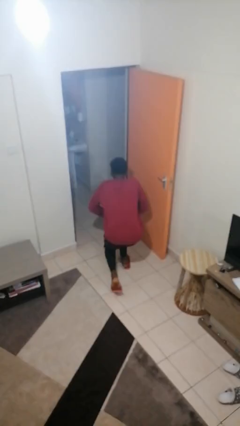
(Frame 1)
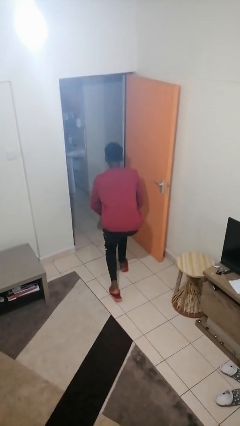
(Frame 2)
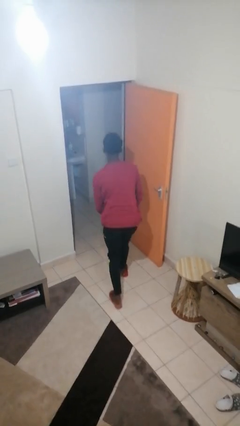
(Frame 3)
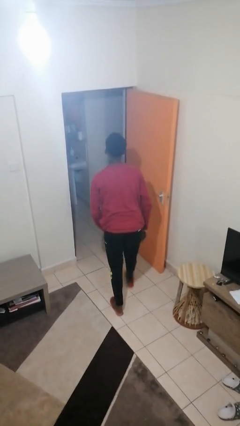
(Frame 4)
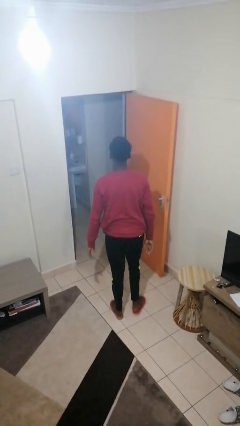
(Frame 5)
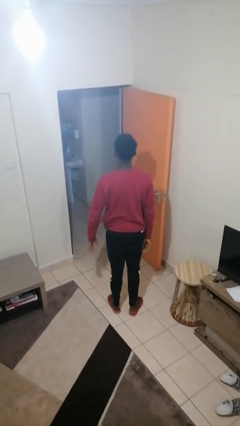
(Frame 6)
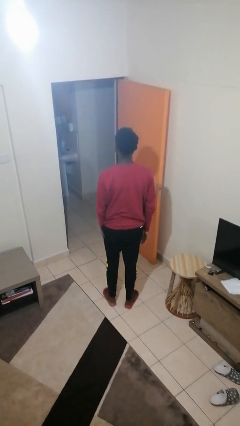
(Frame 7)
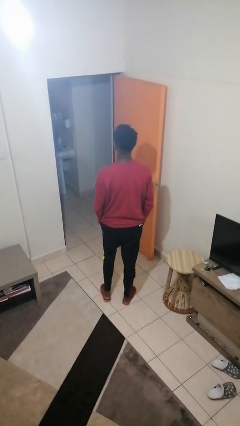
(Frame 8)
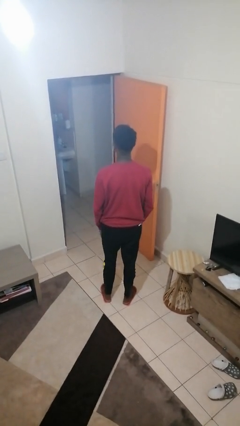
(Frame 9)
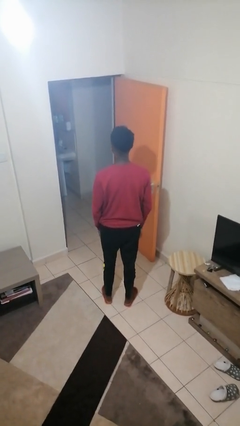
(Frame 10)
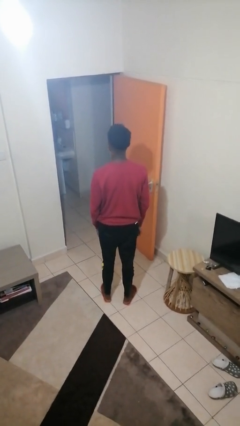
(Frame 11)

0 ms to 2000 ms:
person stands up from floor

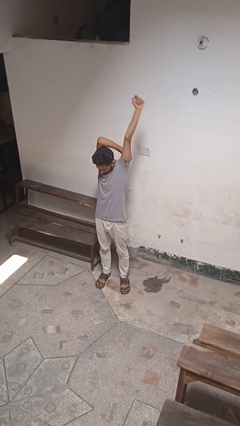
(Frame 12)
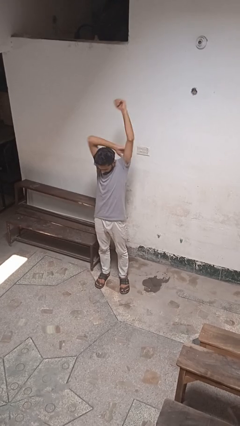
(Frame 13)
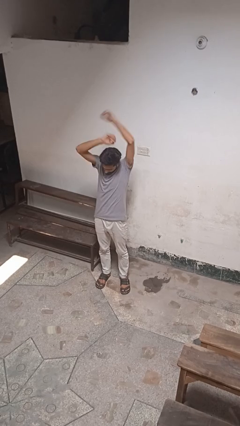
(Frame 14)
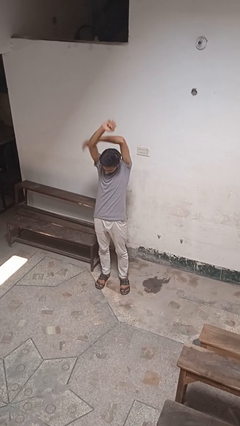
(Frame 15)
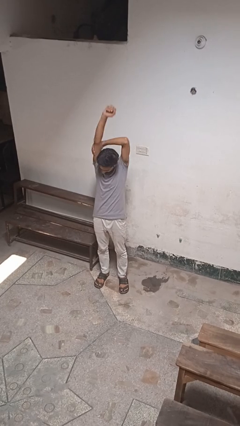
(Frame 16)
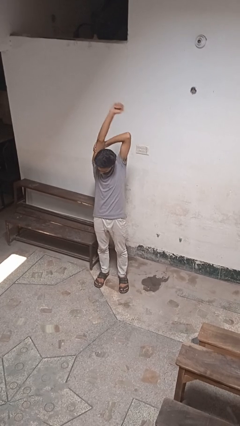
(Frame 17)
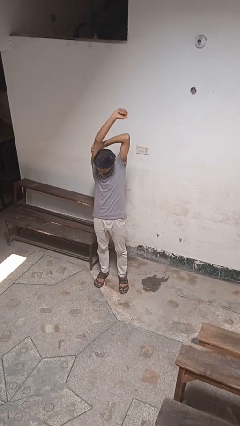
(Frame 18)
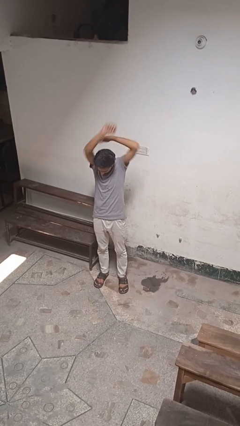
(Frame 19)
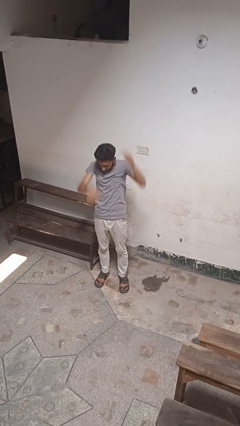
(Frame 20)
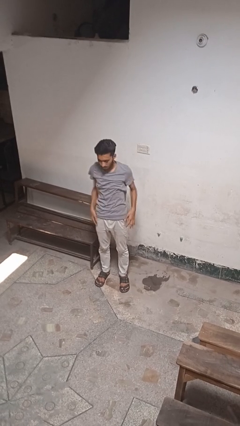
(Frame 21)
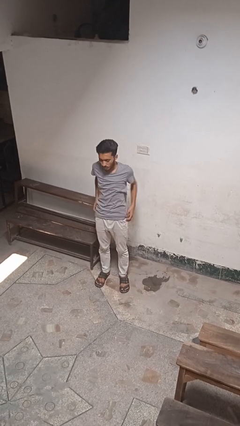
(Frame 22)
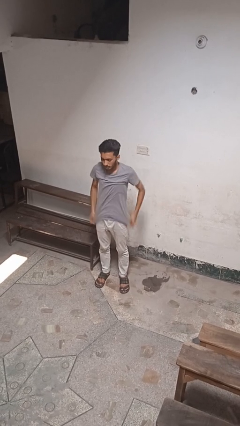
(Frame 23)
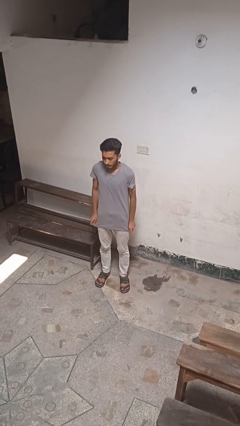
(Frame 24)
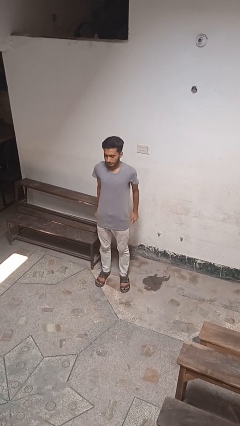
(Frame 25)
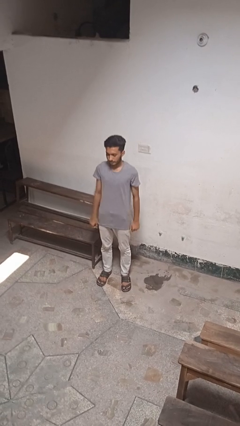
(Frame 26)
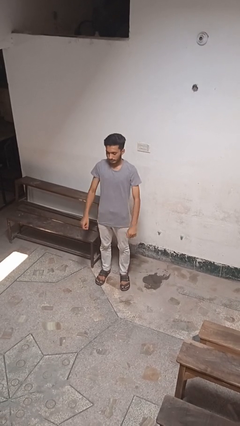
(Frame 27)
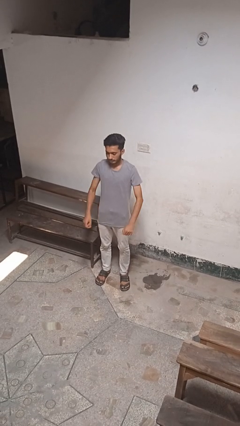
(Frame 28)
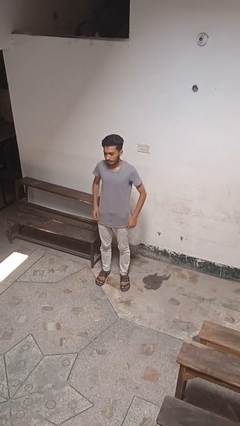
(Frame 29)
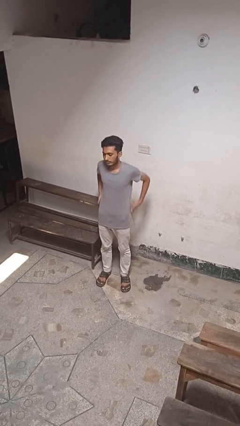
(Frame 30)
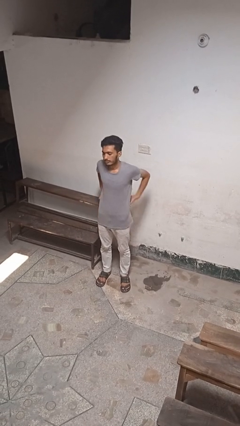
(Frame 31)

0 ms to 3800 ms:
person puts feet up

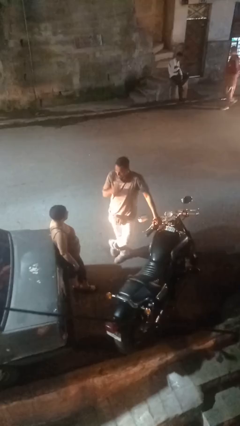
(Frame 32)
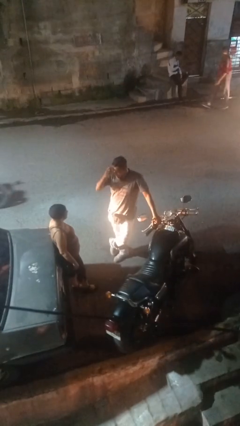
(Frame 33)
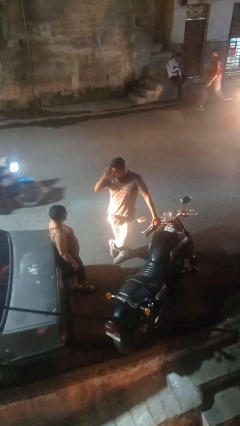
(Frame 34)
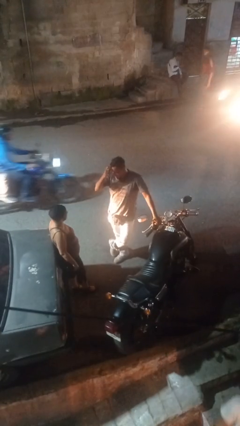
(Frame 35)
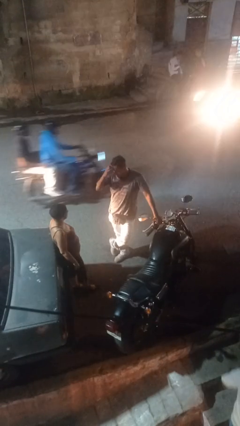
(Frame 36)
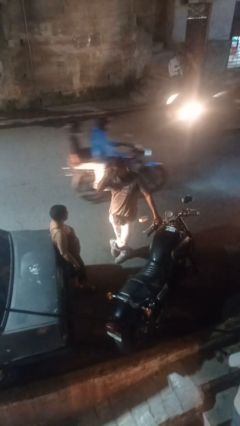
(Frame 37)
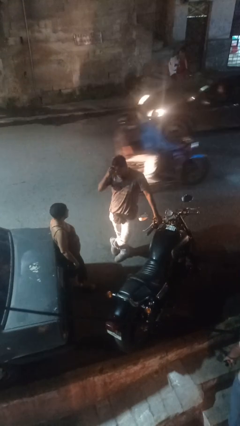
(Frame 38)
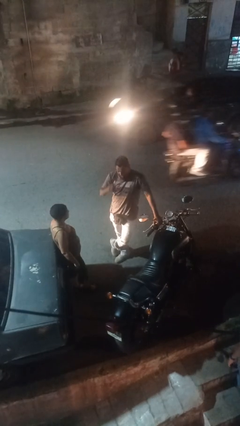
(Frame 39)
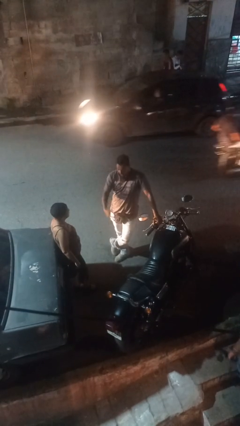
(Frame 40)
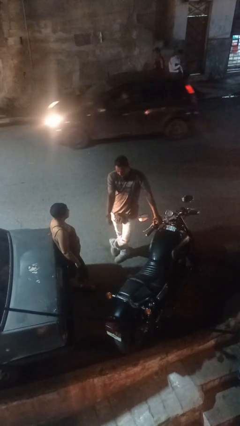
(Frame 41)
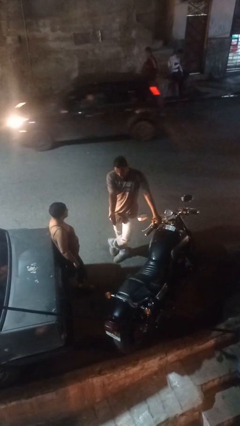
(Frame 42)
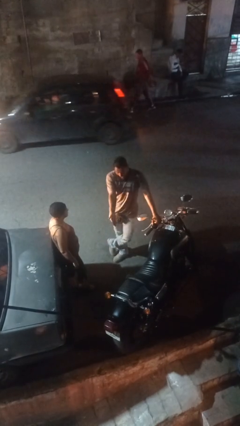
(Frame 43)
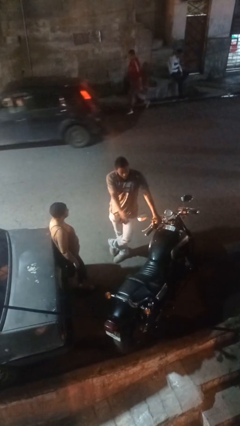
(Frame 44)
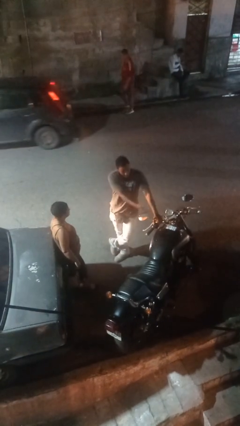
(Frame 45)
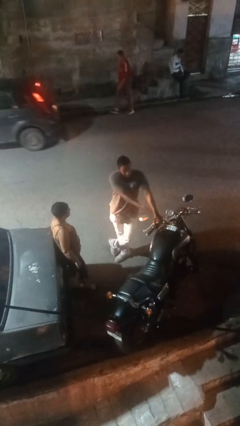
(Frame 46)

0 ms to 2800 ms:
person talks to person

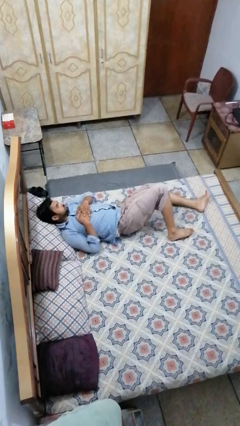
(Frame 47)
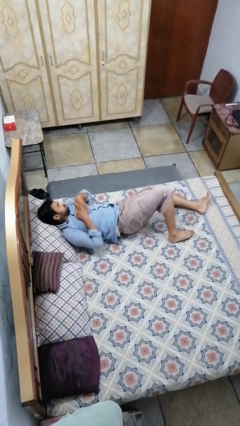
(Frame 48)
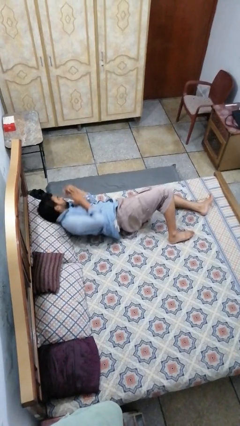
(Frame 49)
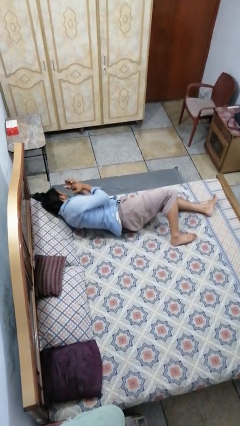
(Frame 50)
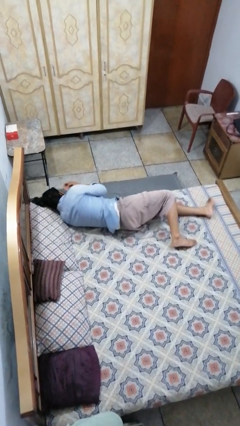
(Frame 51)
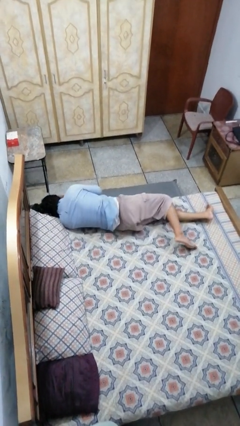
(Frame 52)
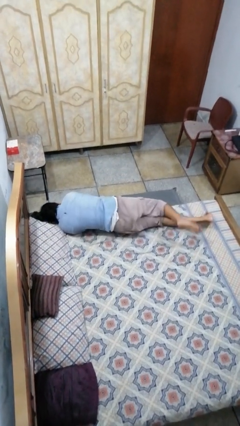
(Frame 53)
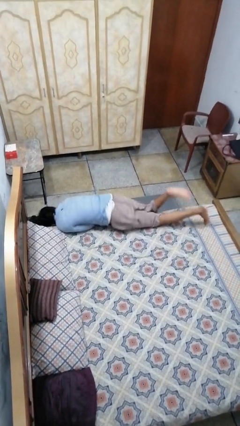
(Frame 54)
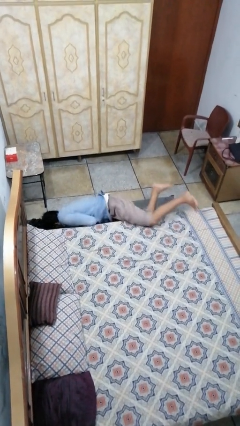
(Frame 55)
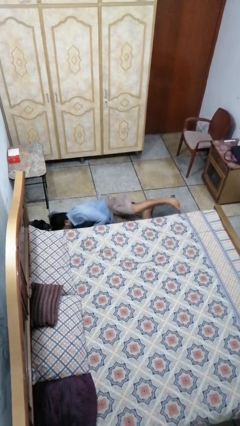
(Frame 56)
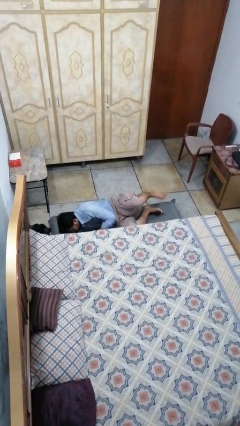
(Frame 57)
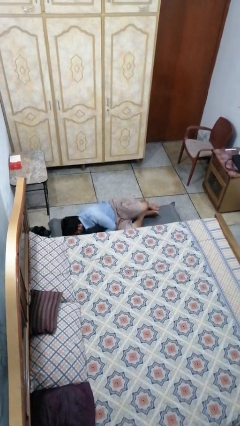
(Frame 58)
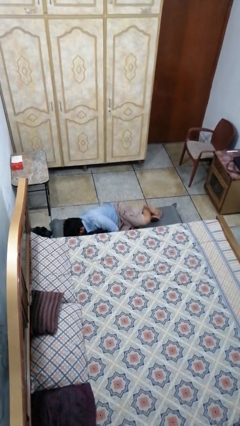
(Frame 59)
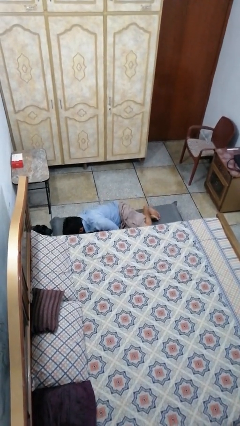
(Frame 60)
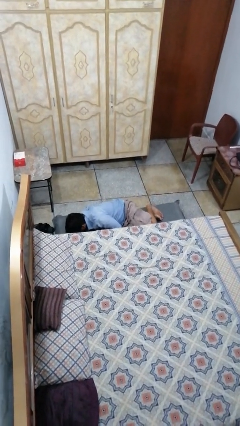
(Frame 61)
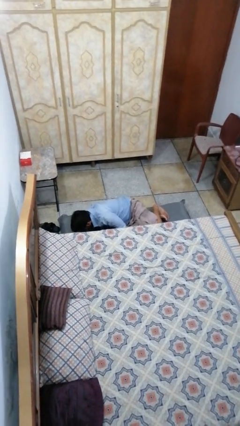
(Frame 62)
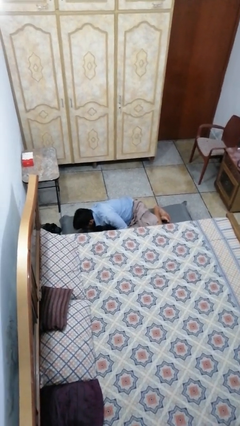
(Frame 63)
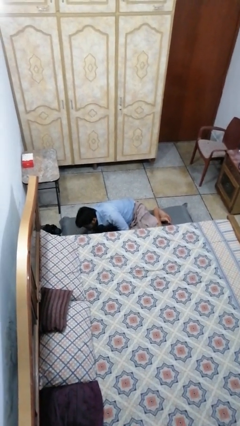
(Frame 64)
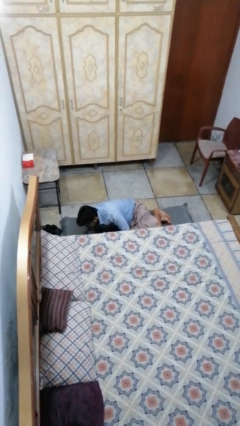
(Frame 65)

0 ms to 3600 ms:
person falls from bed

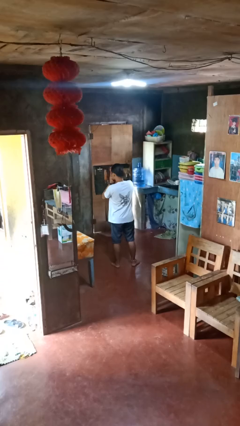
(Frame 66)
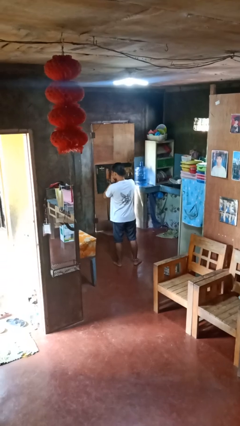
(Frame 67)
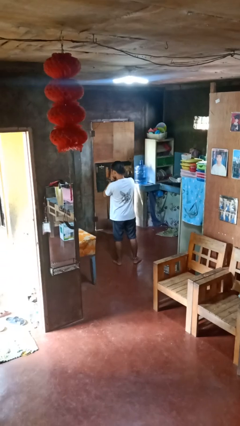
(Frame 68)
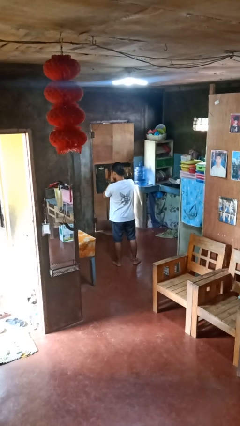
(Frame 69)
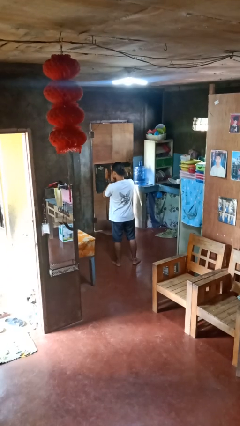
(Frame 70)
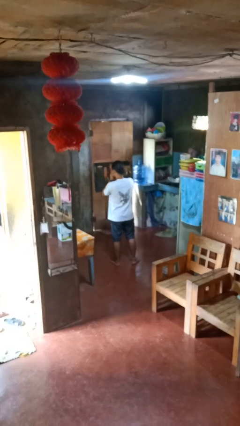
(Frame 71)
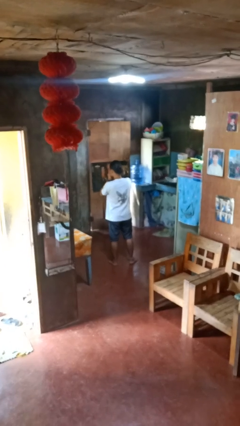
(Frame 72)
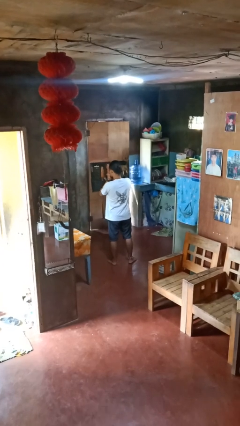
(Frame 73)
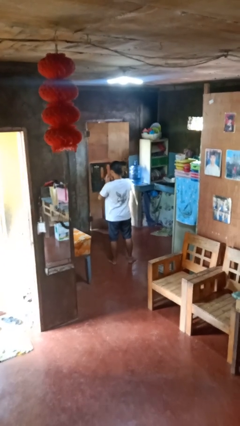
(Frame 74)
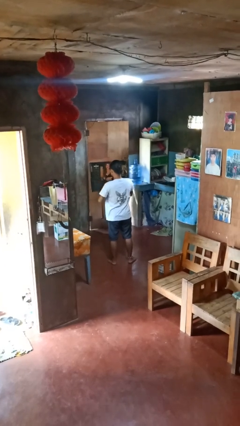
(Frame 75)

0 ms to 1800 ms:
person sneezes into hand

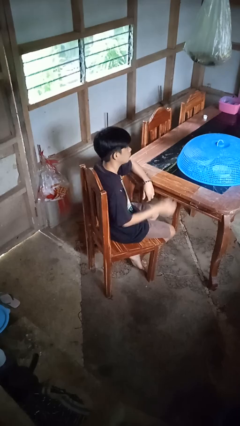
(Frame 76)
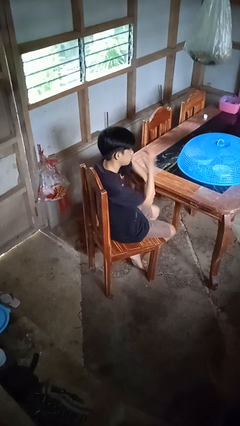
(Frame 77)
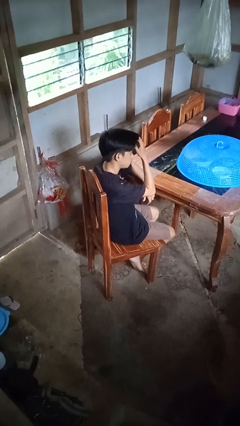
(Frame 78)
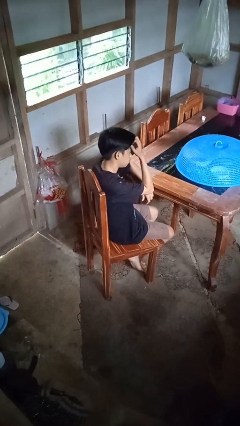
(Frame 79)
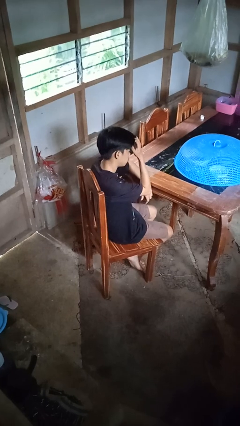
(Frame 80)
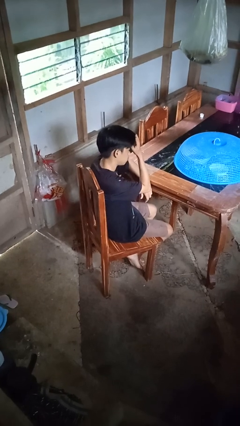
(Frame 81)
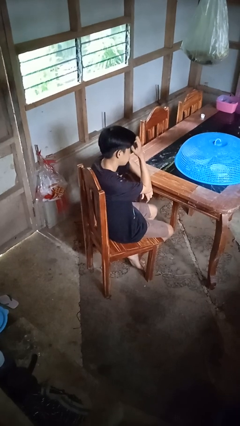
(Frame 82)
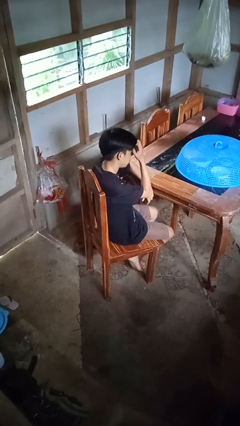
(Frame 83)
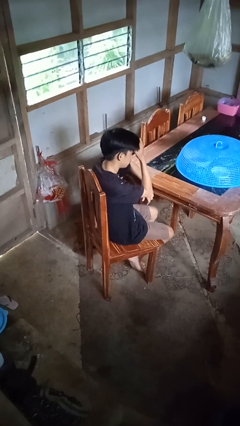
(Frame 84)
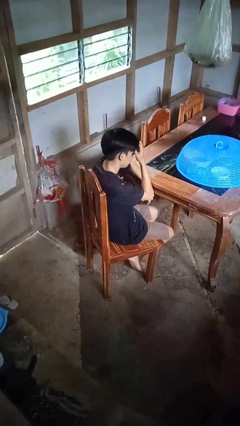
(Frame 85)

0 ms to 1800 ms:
person scratches face

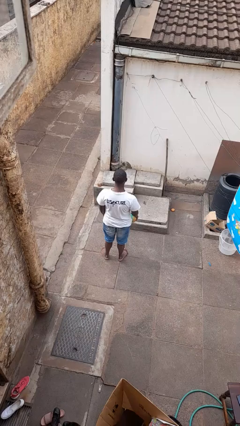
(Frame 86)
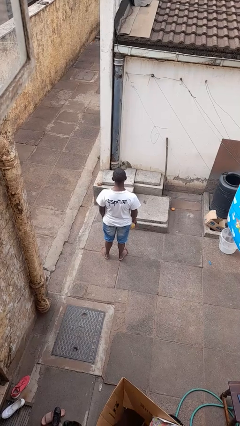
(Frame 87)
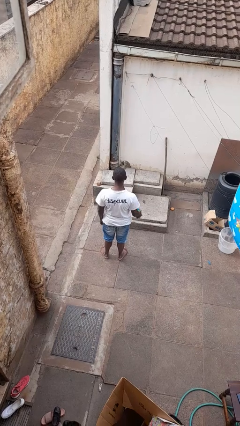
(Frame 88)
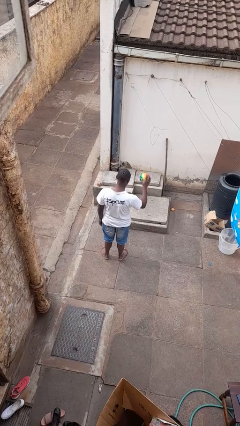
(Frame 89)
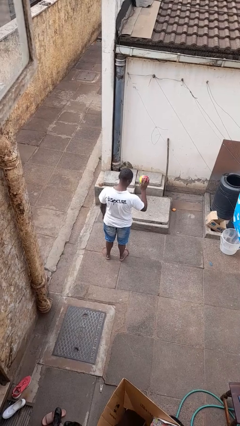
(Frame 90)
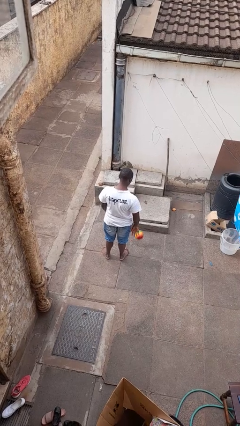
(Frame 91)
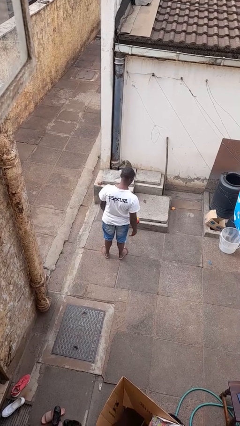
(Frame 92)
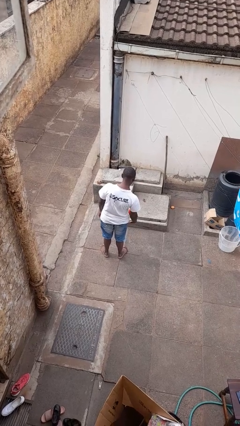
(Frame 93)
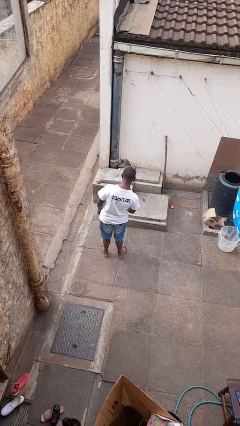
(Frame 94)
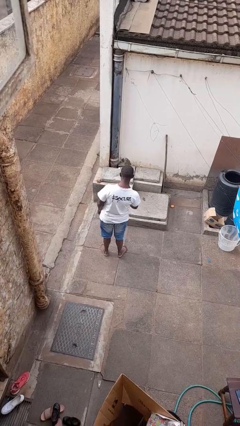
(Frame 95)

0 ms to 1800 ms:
person bounces ball on floor
